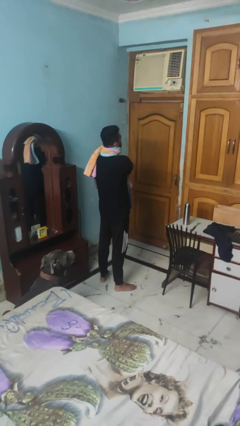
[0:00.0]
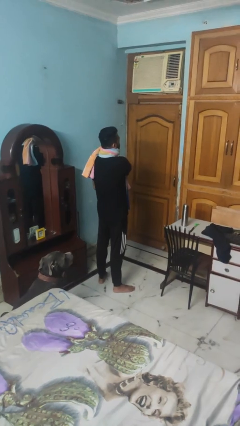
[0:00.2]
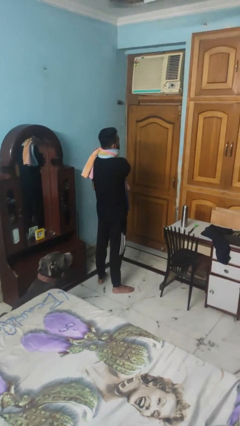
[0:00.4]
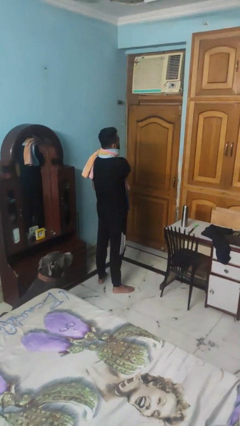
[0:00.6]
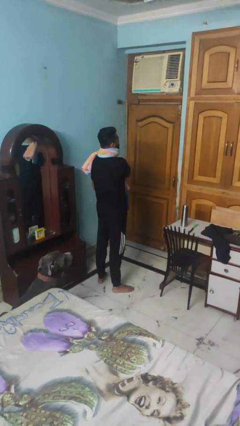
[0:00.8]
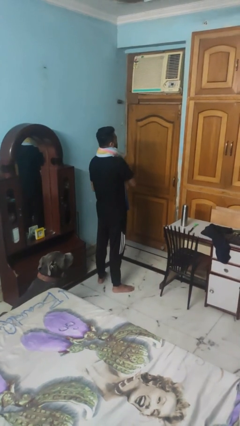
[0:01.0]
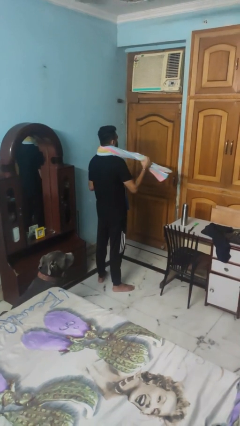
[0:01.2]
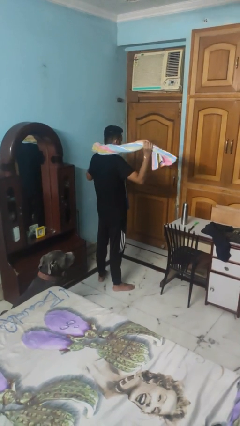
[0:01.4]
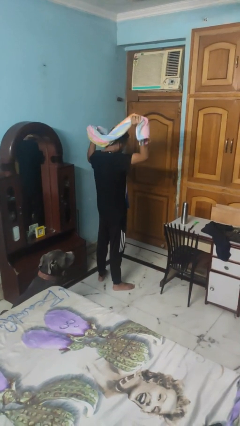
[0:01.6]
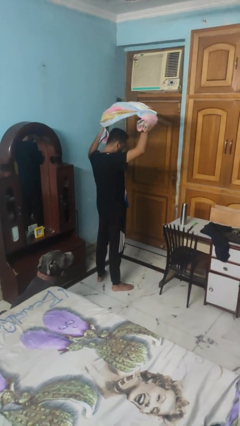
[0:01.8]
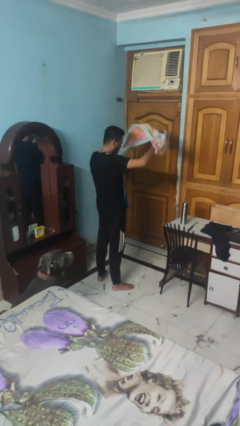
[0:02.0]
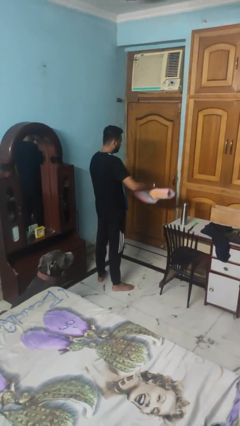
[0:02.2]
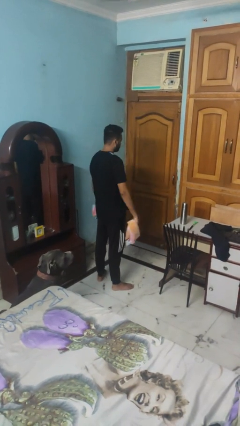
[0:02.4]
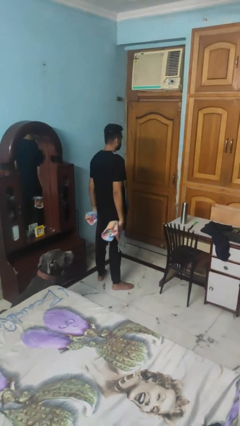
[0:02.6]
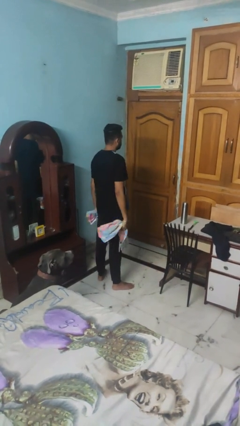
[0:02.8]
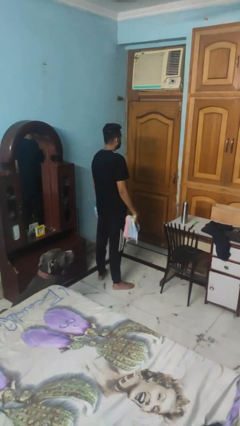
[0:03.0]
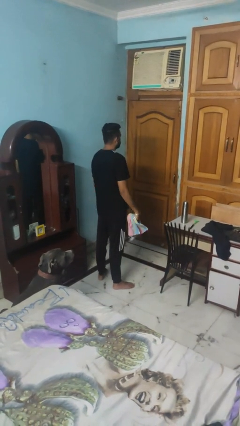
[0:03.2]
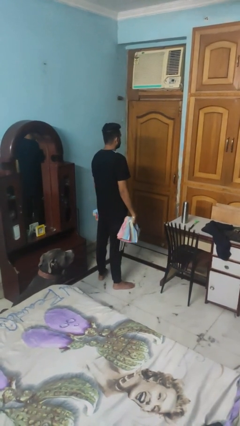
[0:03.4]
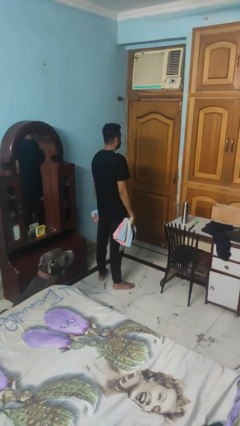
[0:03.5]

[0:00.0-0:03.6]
person takes off scarf

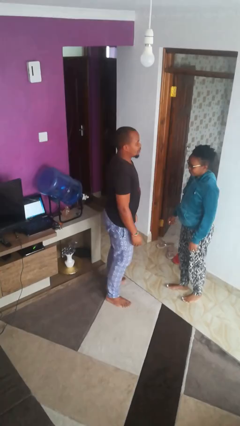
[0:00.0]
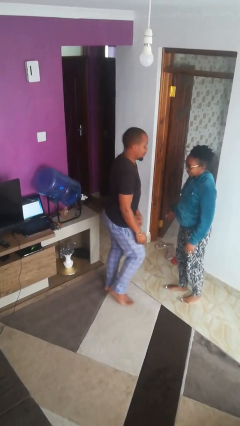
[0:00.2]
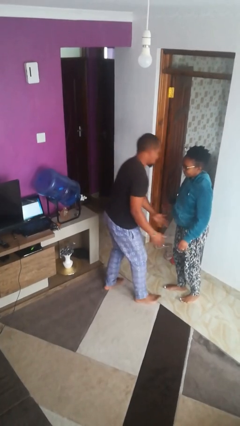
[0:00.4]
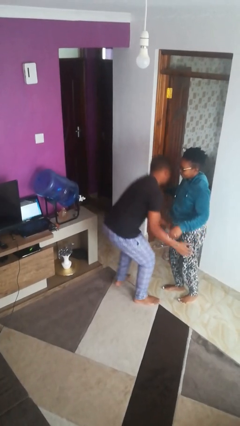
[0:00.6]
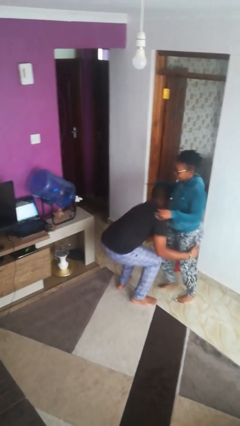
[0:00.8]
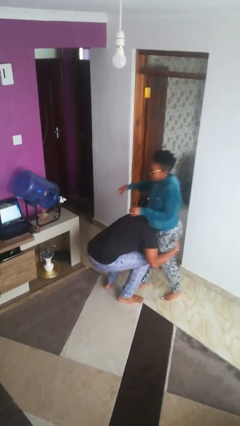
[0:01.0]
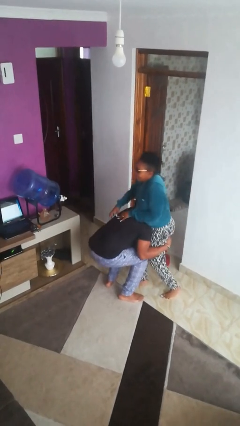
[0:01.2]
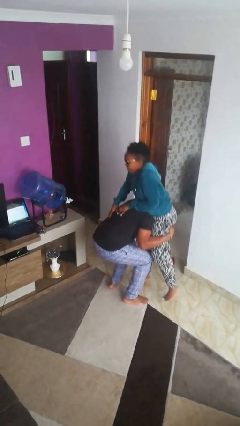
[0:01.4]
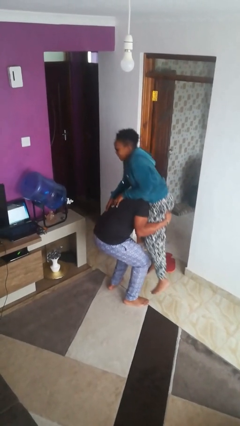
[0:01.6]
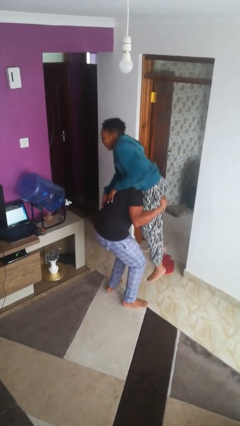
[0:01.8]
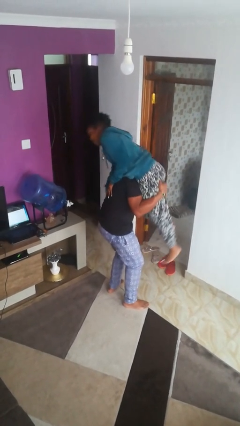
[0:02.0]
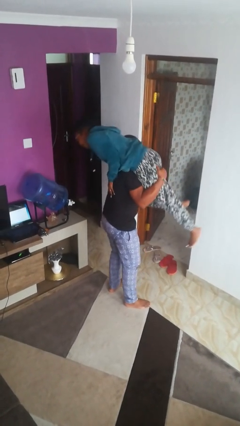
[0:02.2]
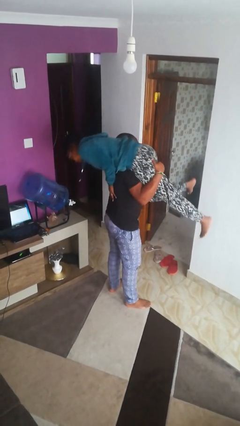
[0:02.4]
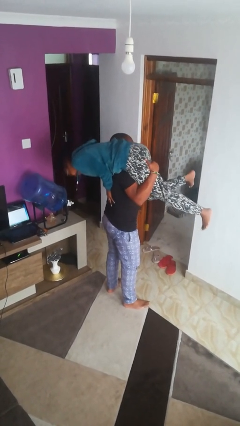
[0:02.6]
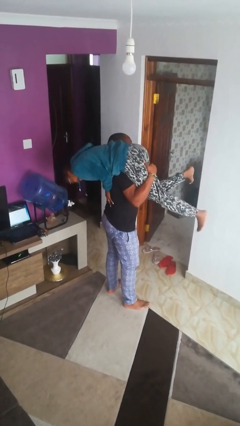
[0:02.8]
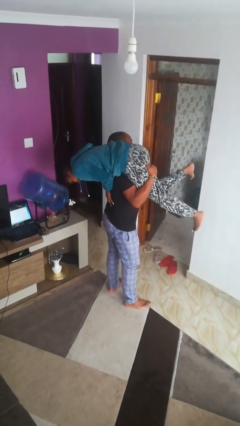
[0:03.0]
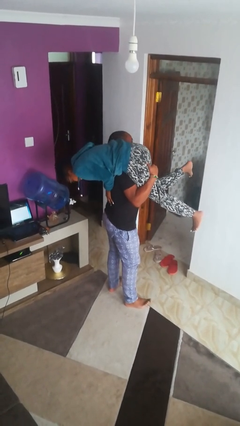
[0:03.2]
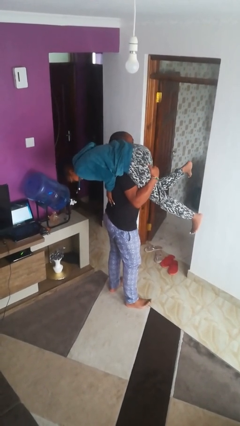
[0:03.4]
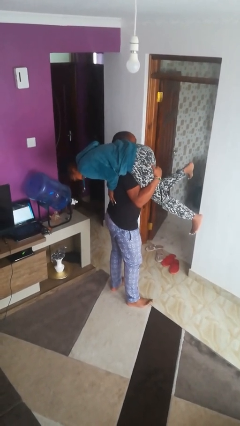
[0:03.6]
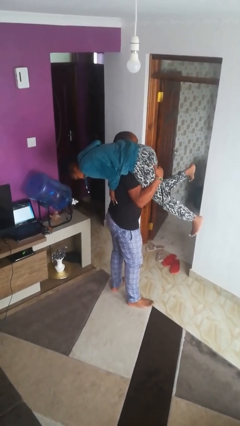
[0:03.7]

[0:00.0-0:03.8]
person carries person over shoulder

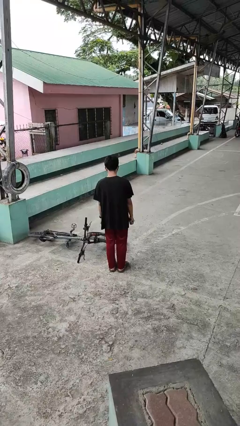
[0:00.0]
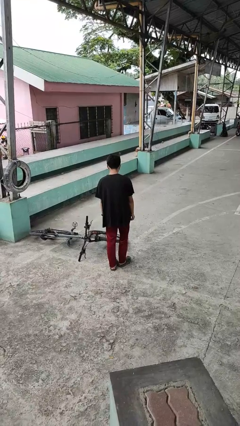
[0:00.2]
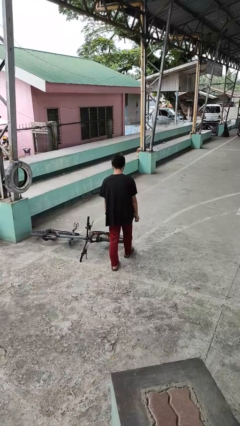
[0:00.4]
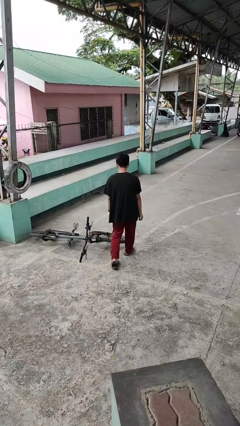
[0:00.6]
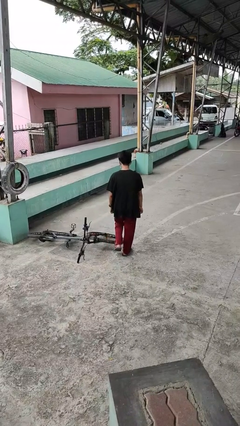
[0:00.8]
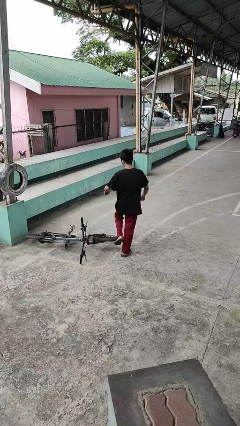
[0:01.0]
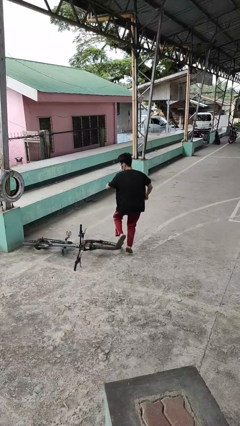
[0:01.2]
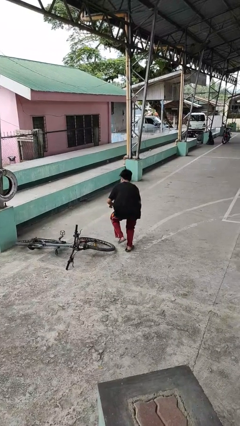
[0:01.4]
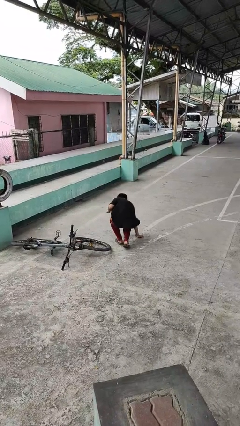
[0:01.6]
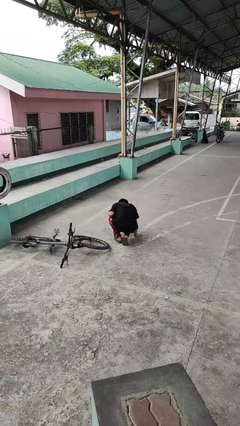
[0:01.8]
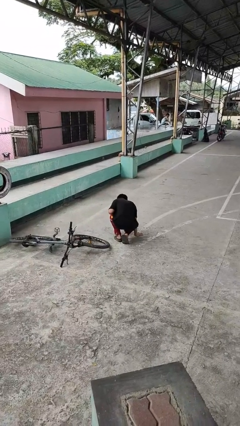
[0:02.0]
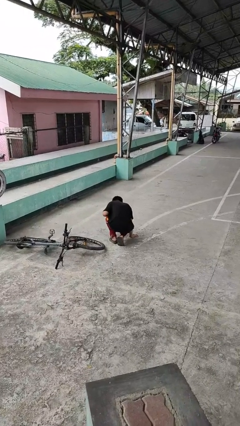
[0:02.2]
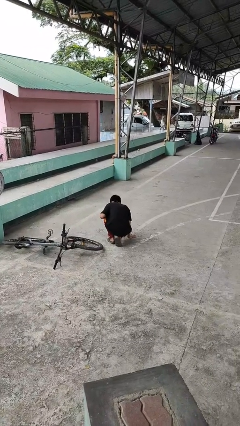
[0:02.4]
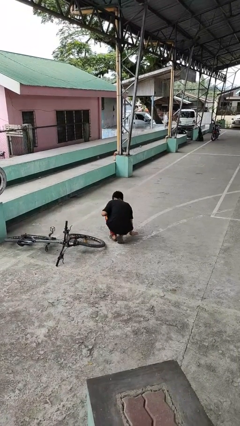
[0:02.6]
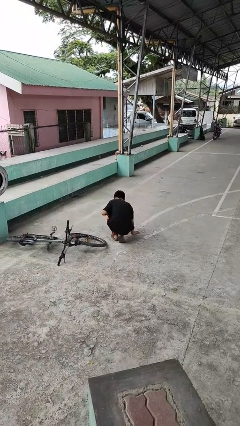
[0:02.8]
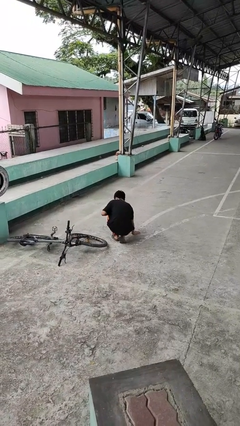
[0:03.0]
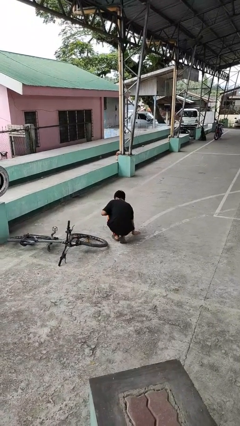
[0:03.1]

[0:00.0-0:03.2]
person trips on object on floor

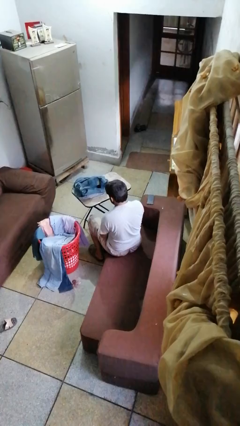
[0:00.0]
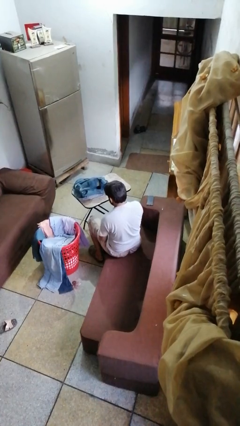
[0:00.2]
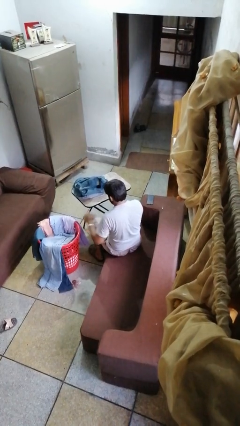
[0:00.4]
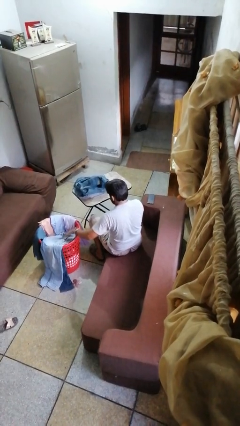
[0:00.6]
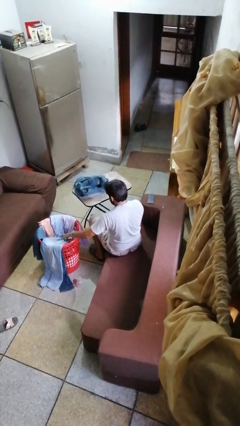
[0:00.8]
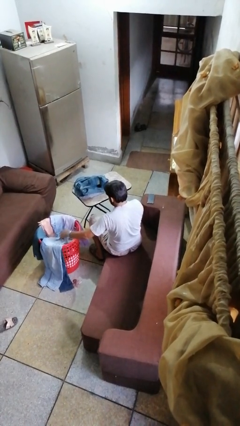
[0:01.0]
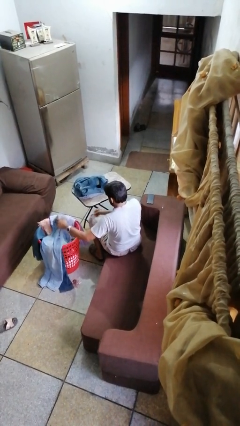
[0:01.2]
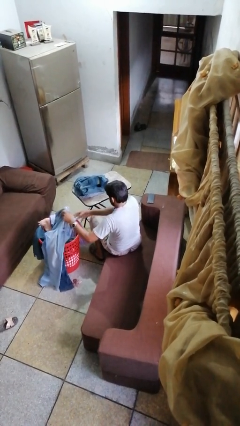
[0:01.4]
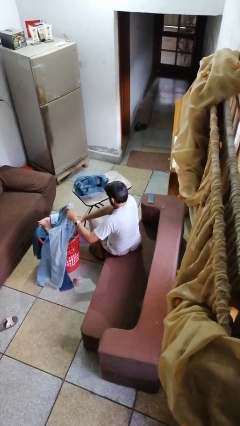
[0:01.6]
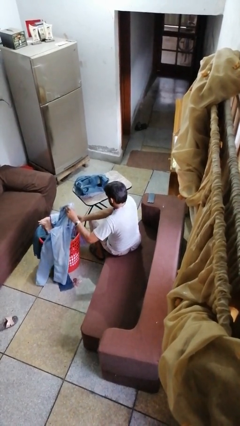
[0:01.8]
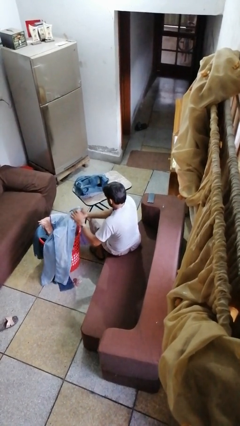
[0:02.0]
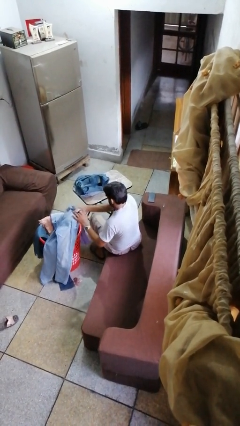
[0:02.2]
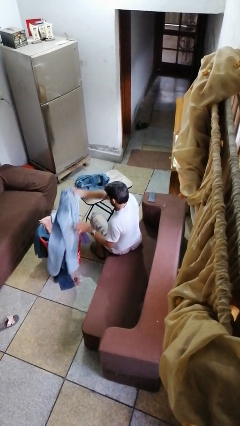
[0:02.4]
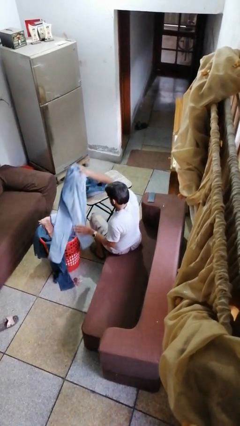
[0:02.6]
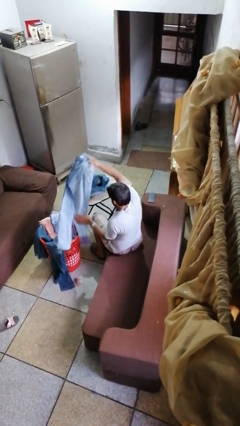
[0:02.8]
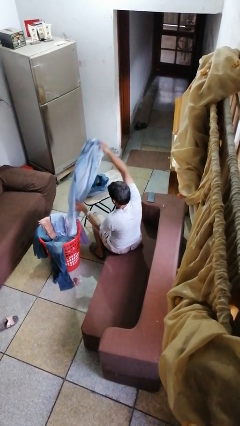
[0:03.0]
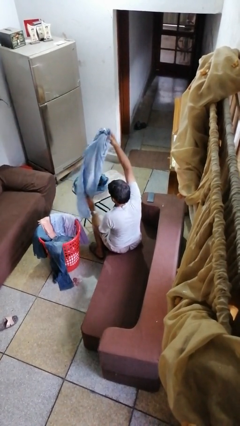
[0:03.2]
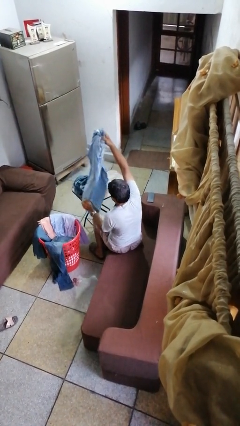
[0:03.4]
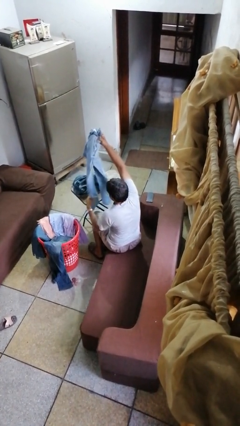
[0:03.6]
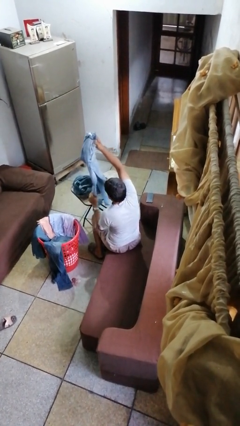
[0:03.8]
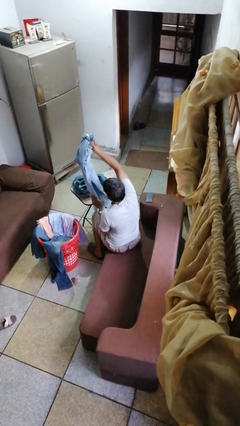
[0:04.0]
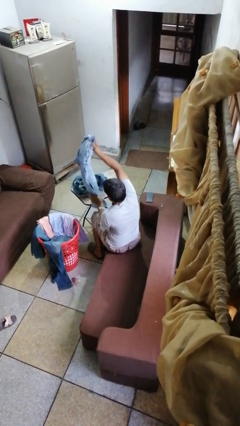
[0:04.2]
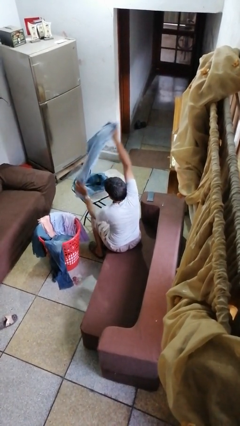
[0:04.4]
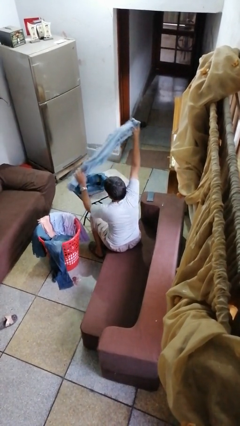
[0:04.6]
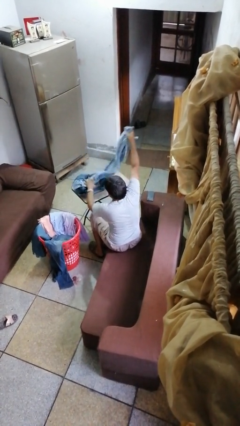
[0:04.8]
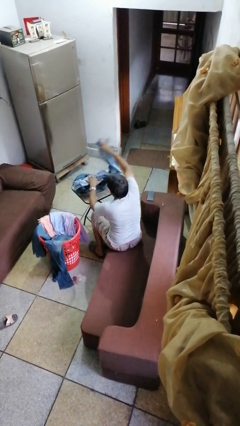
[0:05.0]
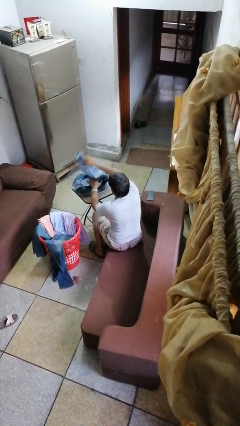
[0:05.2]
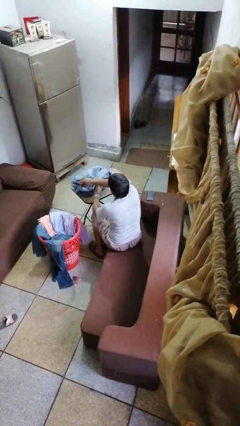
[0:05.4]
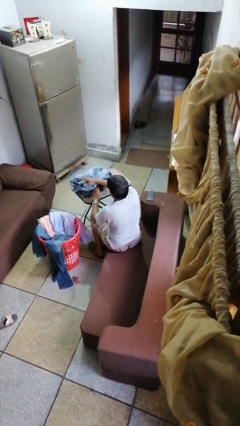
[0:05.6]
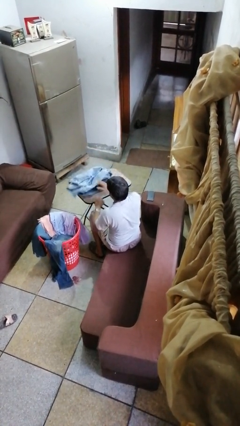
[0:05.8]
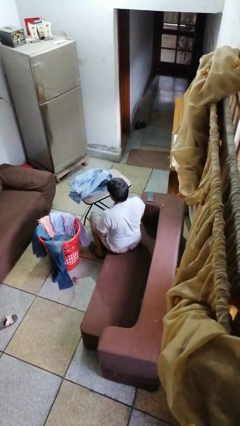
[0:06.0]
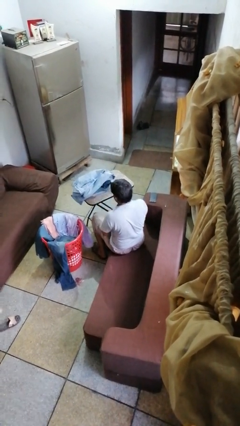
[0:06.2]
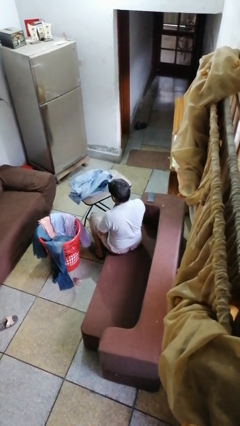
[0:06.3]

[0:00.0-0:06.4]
person folds pants

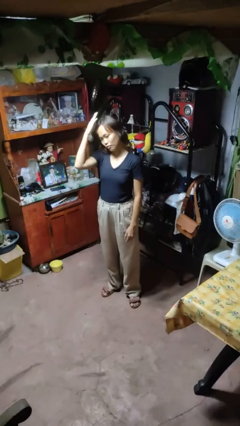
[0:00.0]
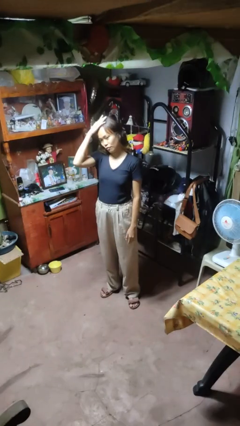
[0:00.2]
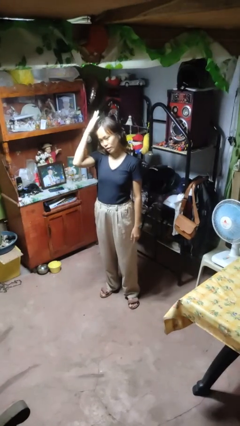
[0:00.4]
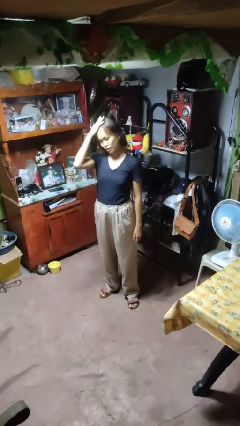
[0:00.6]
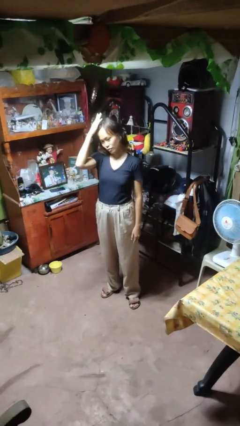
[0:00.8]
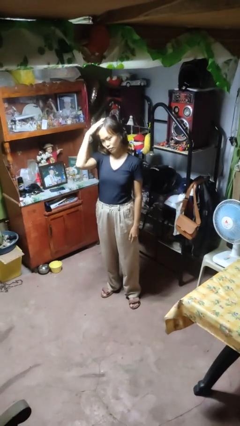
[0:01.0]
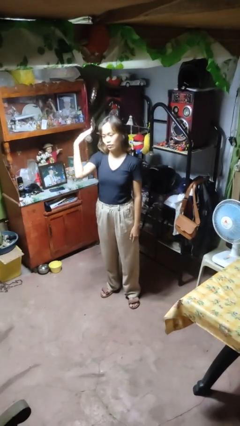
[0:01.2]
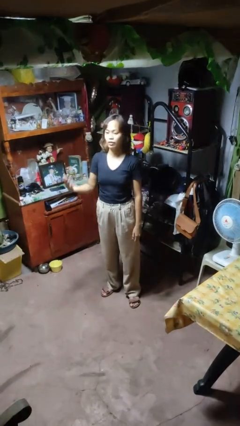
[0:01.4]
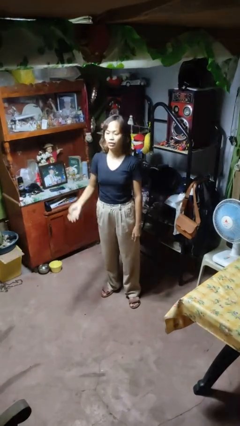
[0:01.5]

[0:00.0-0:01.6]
person pats head
